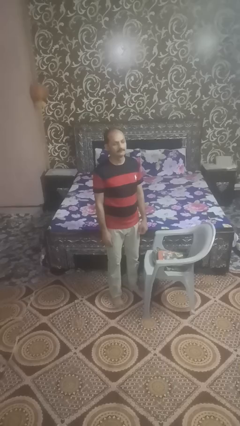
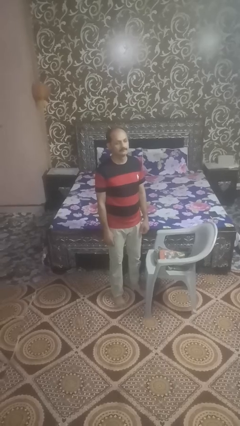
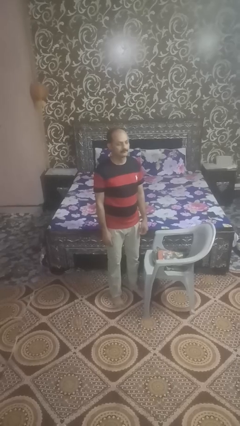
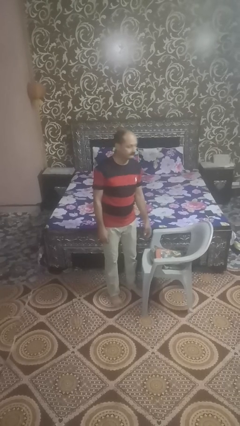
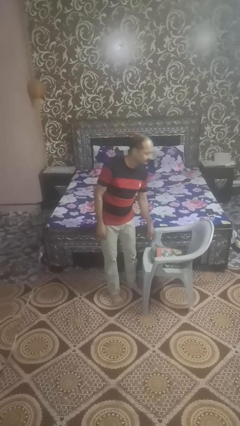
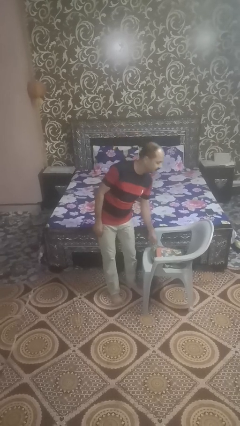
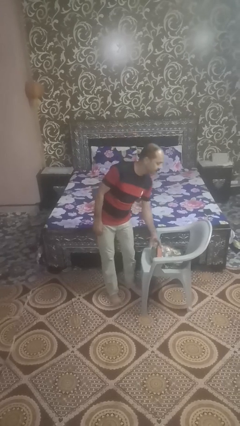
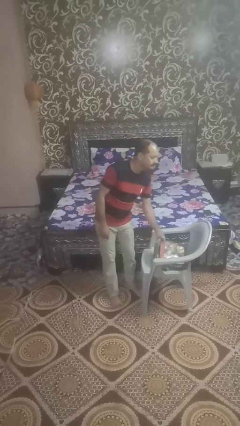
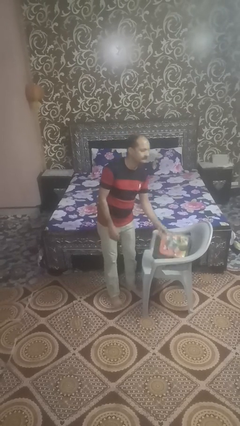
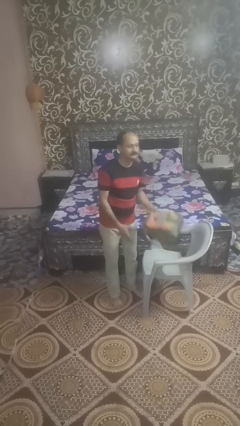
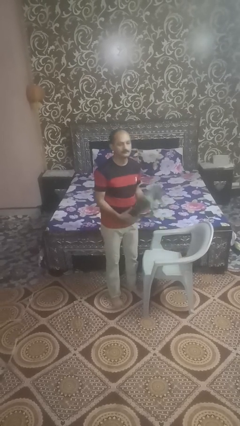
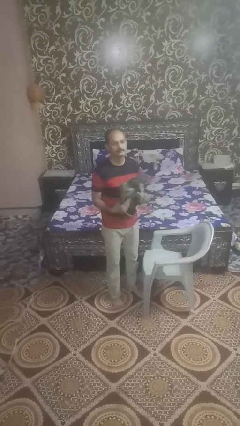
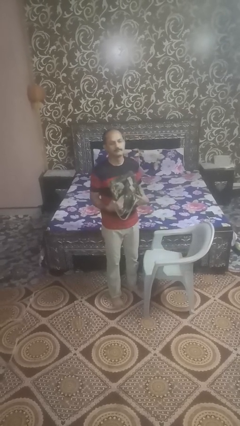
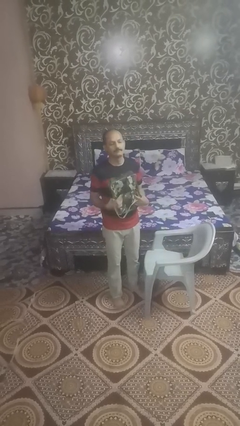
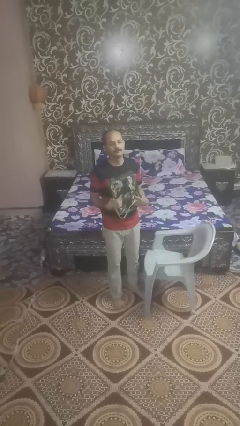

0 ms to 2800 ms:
person picks up object from couch

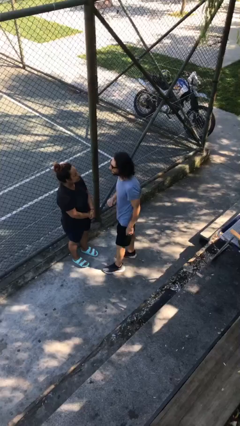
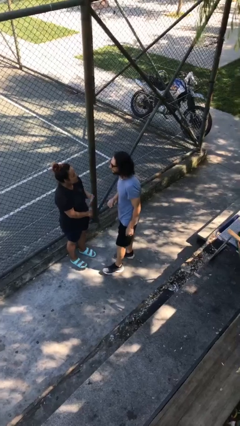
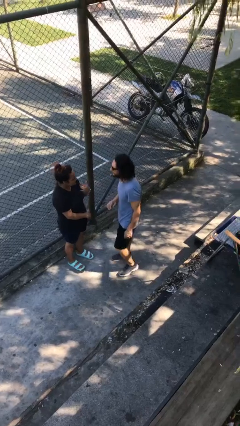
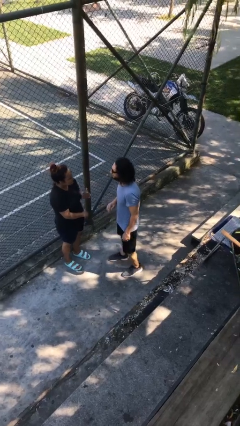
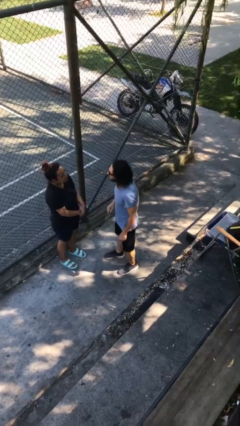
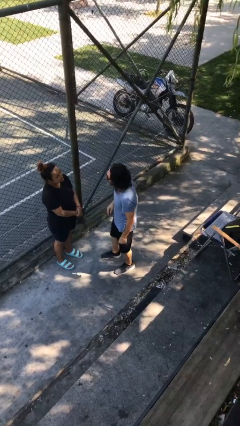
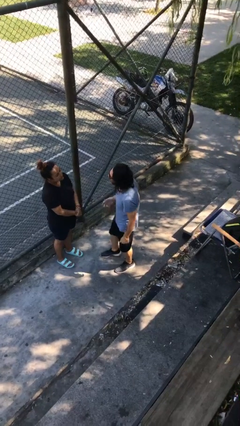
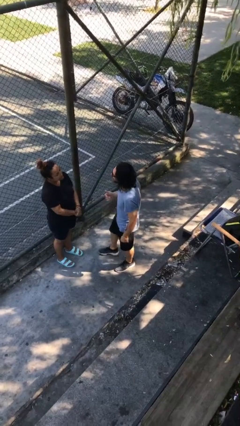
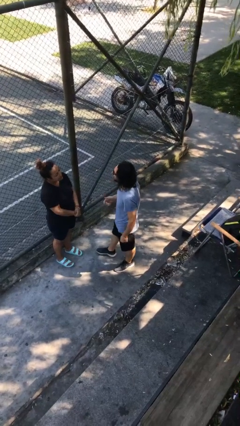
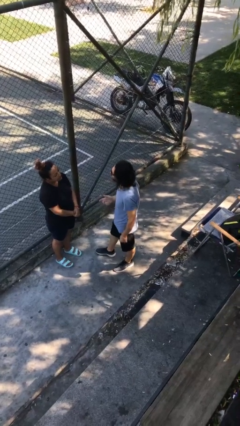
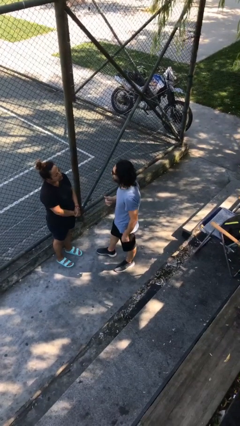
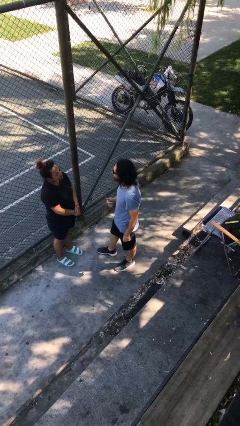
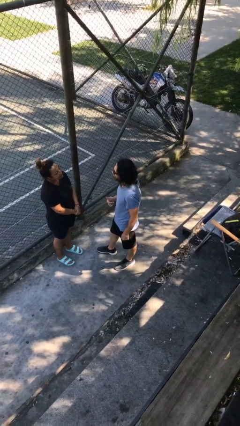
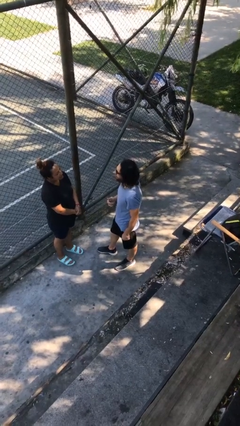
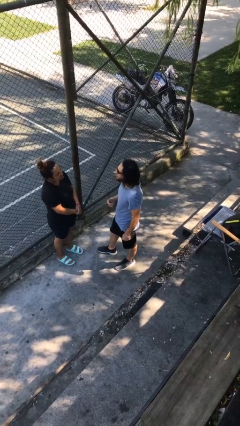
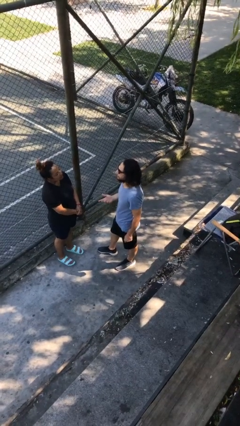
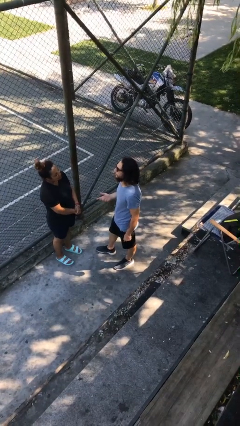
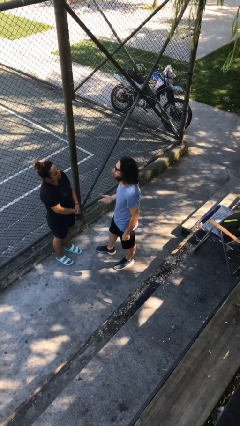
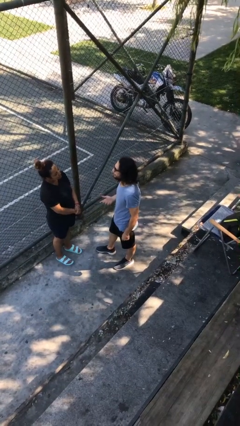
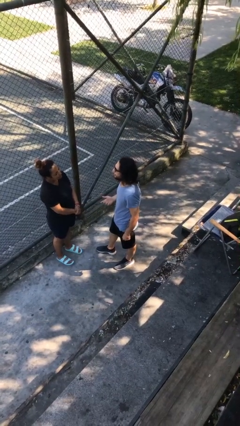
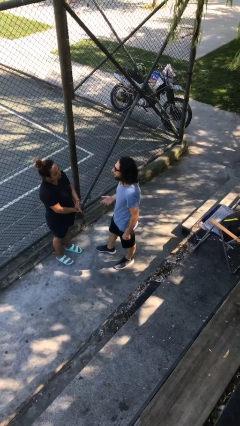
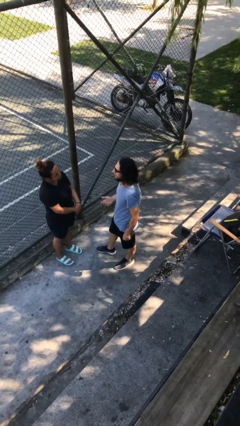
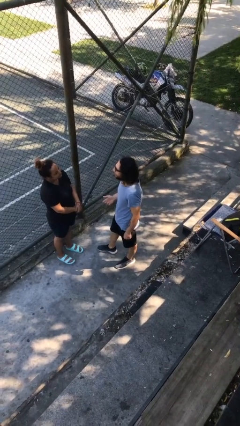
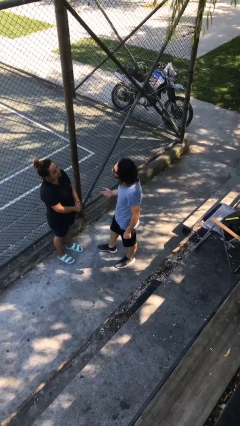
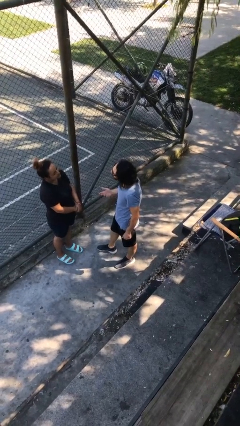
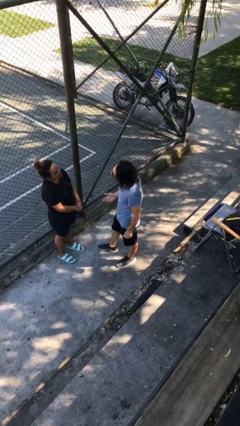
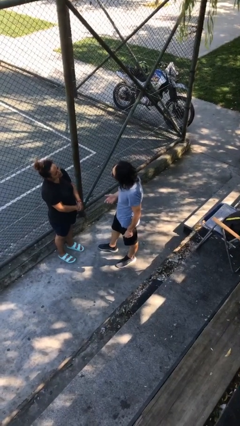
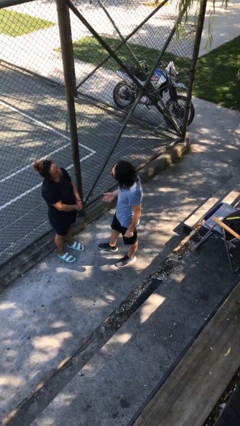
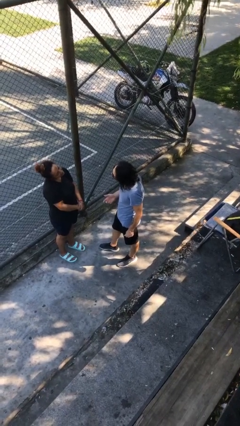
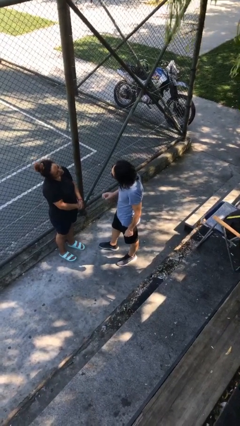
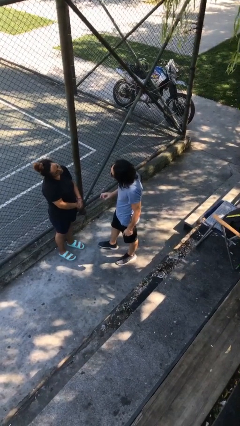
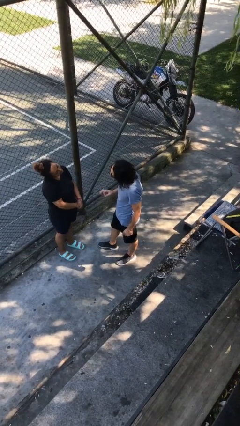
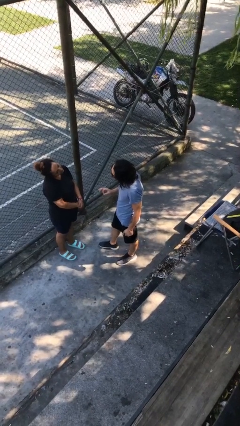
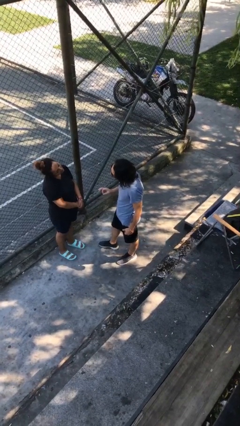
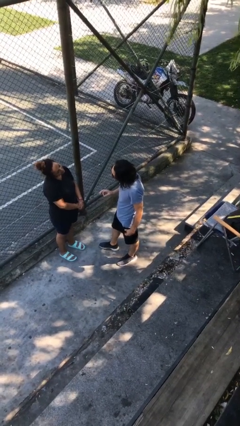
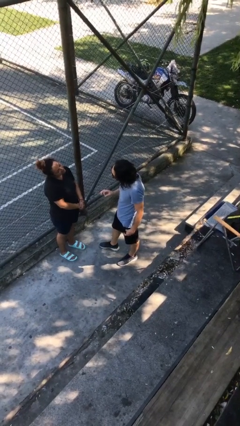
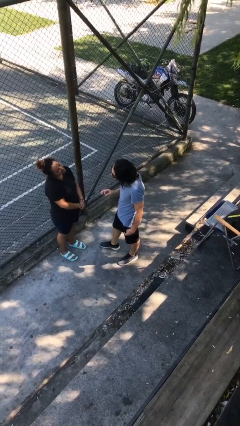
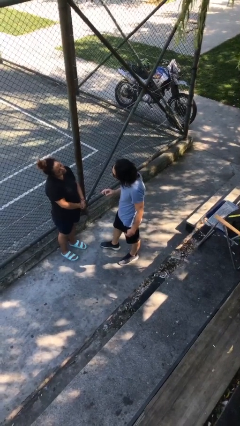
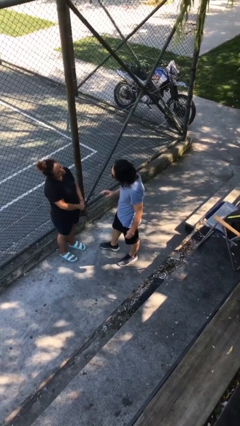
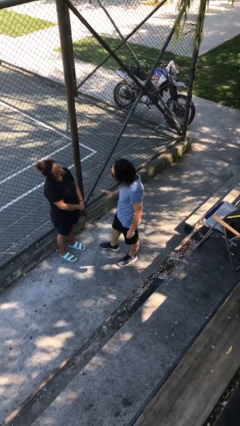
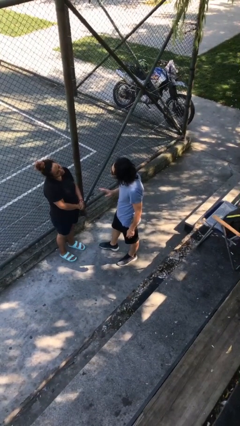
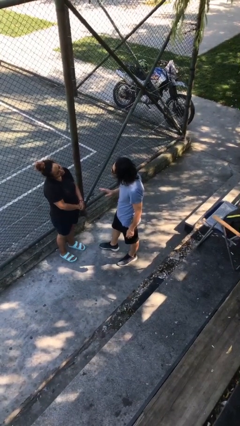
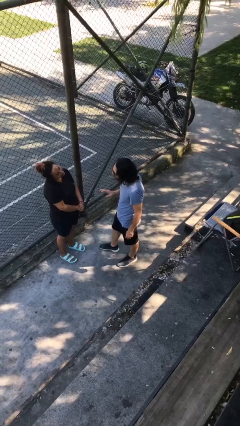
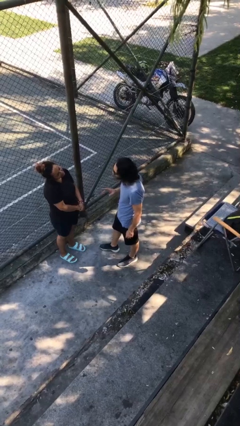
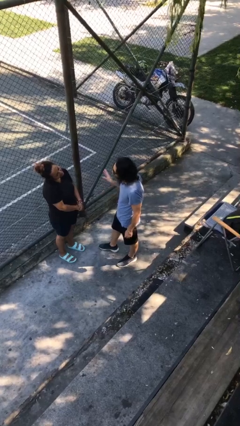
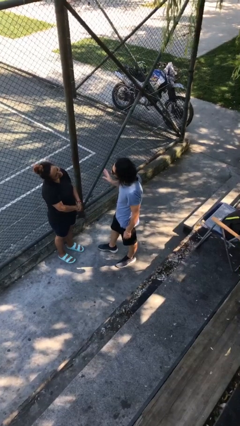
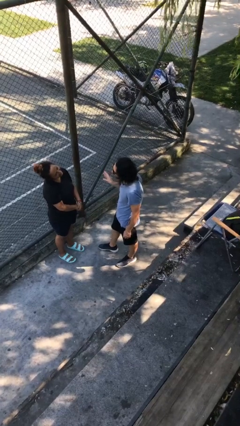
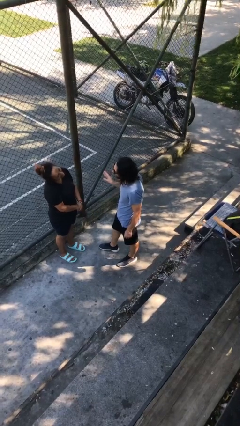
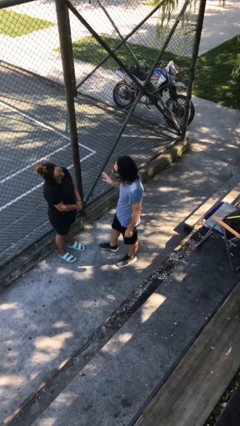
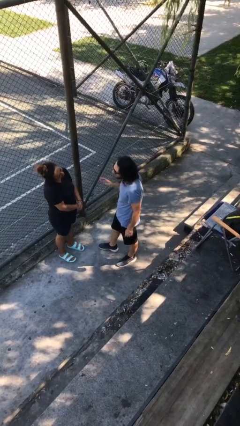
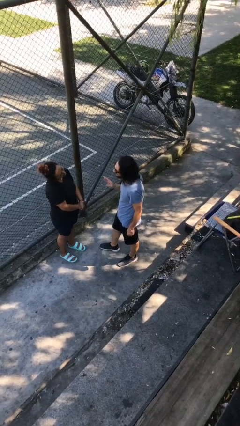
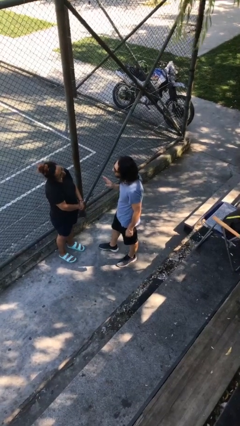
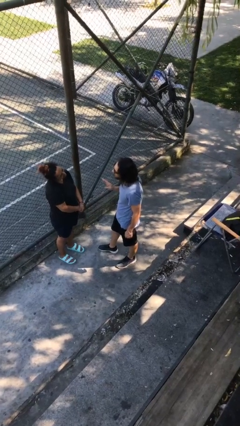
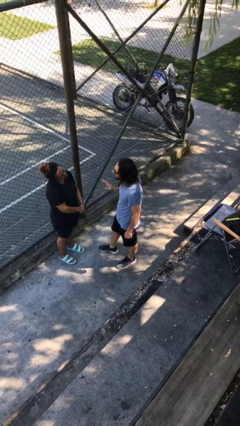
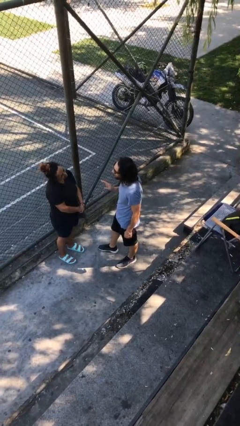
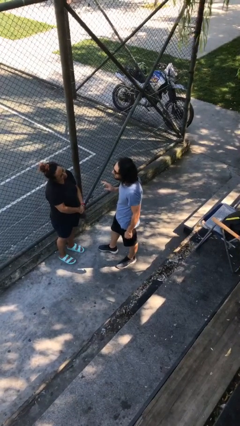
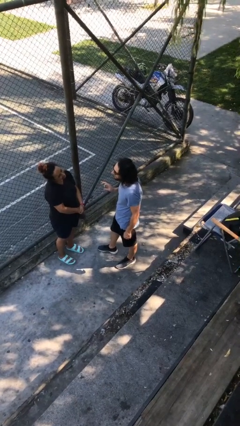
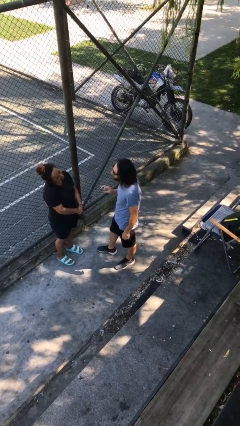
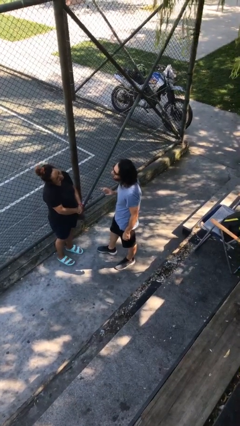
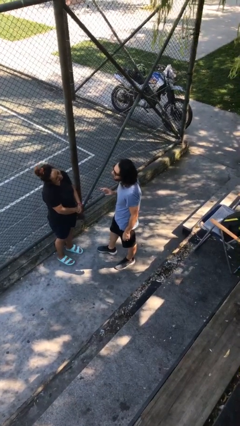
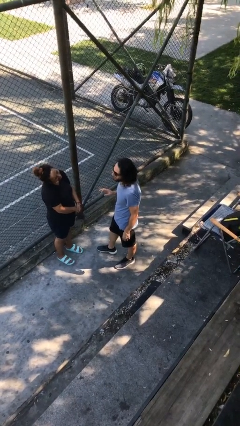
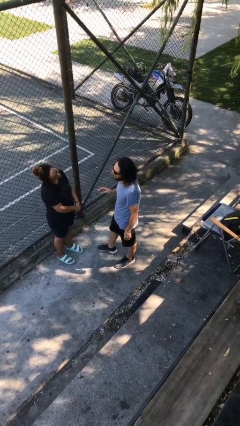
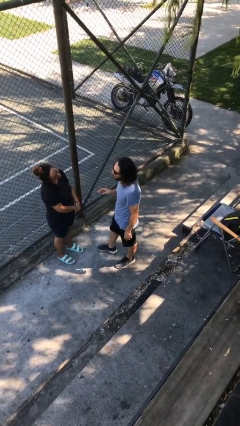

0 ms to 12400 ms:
person talks to person

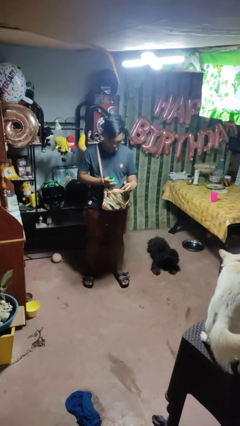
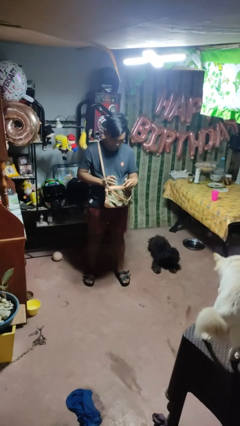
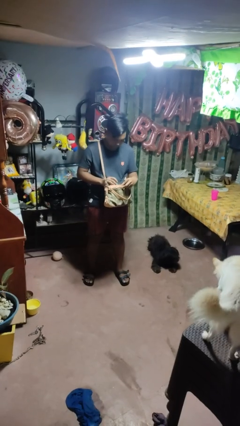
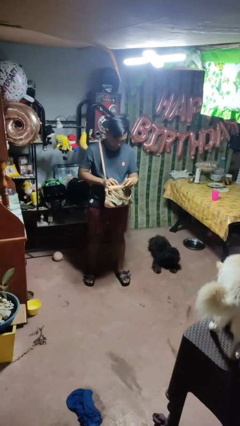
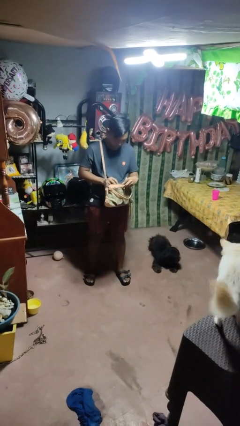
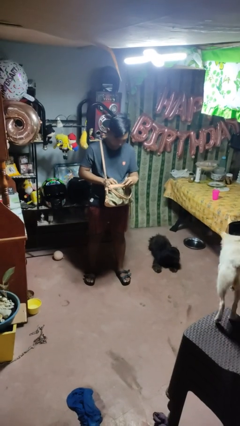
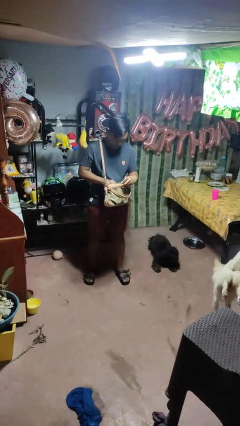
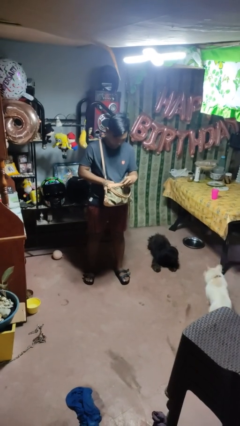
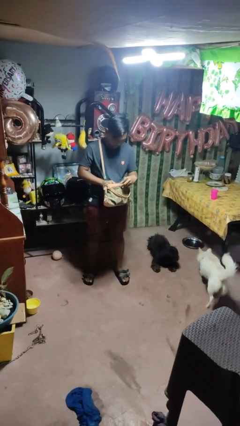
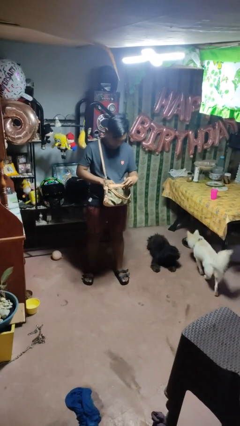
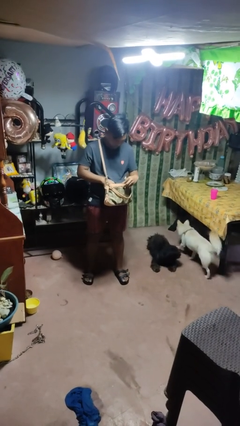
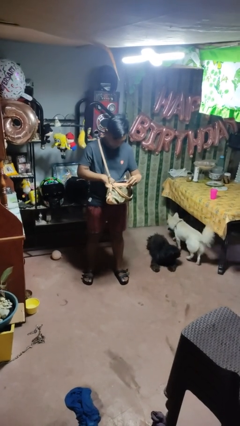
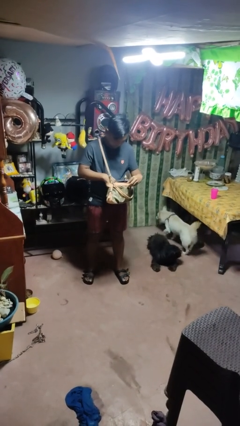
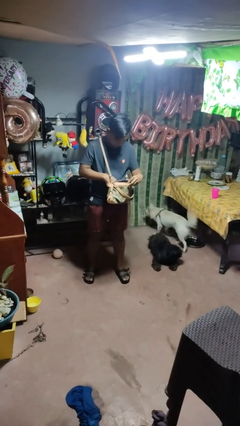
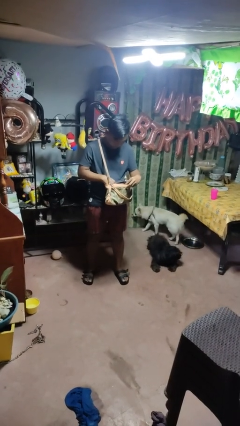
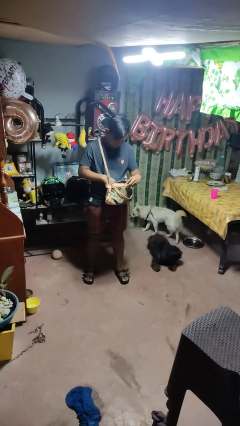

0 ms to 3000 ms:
person puts object into purse
